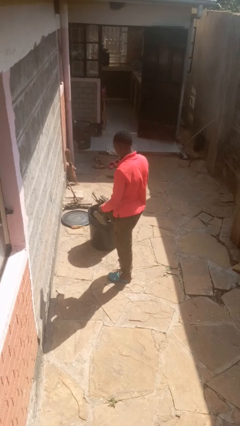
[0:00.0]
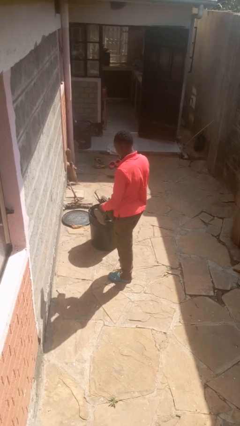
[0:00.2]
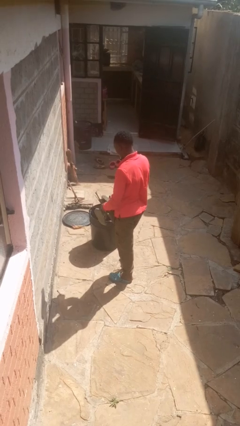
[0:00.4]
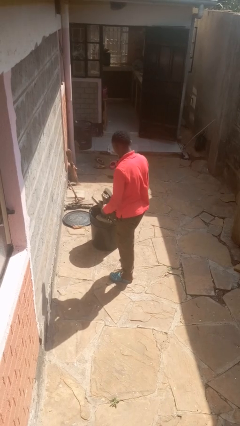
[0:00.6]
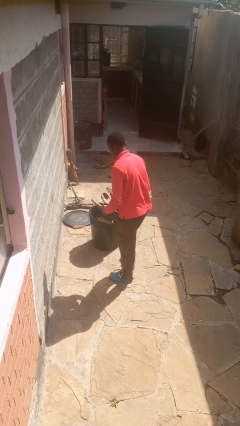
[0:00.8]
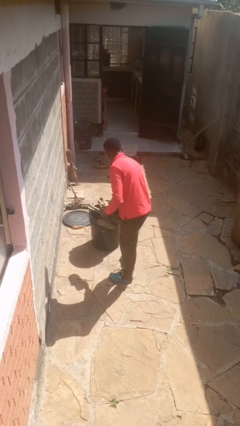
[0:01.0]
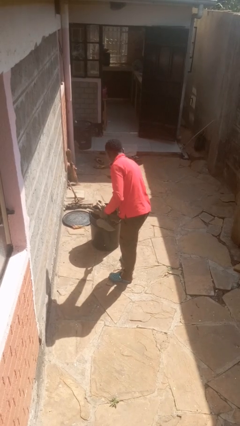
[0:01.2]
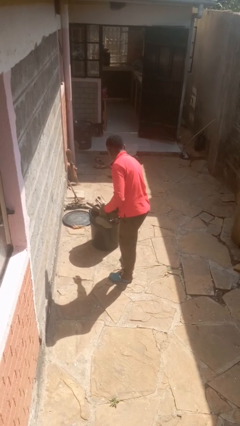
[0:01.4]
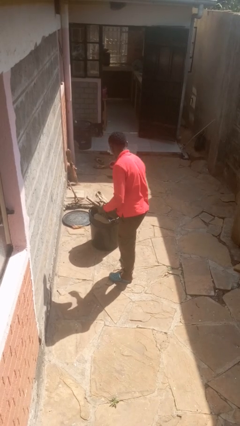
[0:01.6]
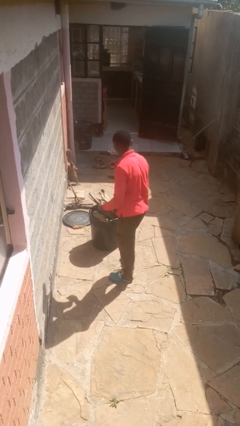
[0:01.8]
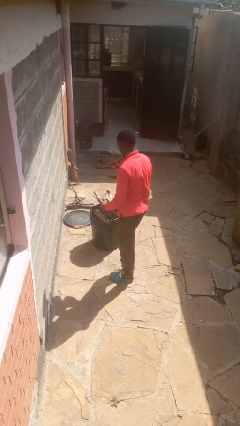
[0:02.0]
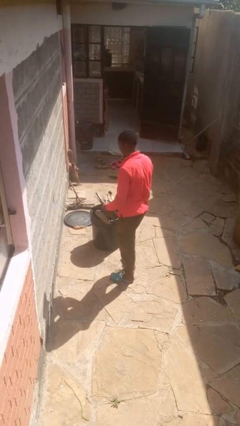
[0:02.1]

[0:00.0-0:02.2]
person discards trash

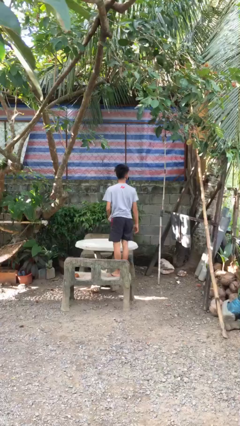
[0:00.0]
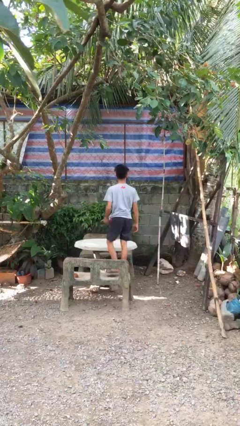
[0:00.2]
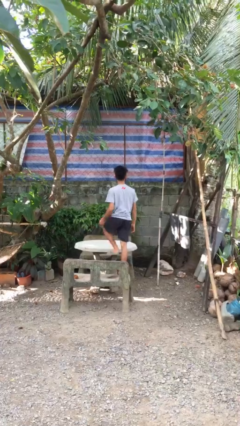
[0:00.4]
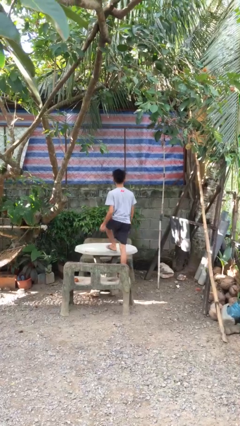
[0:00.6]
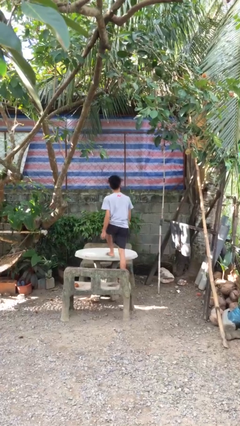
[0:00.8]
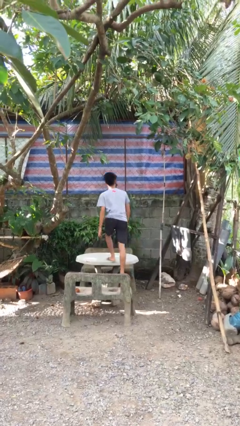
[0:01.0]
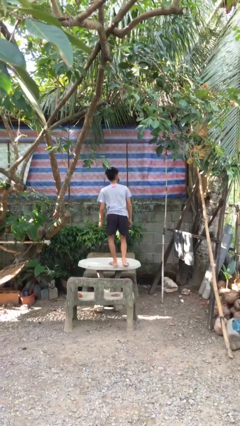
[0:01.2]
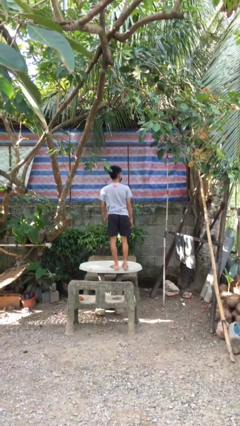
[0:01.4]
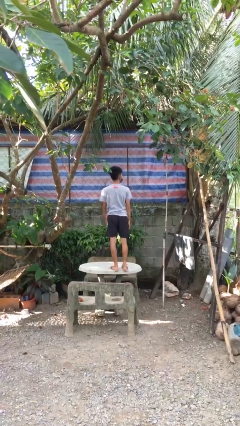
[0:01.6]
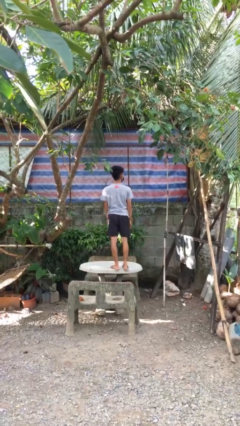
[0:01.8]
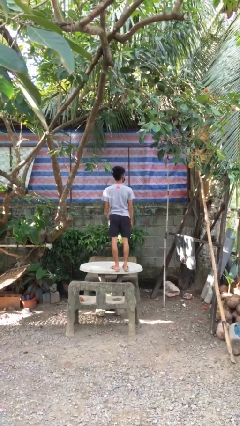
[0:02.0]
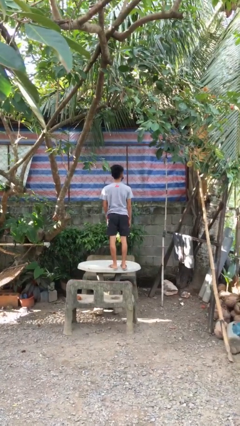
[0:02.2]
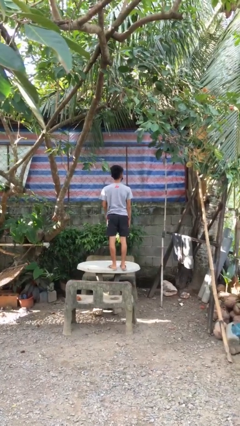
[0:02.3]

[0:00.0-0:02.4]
person climbs on table

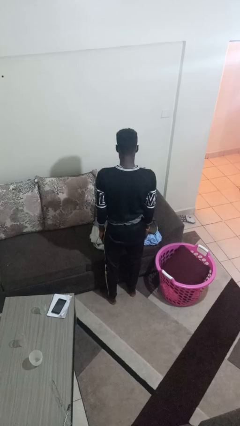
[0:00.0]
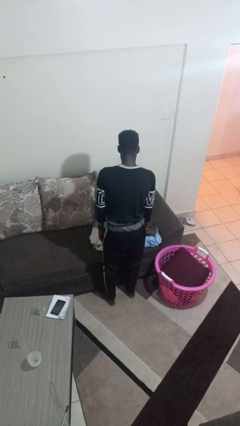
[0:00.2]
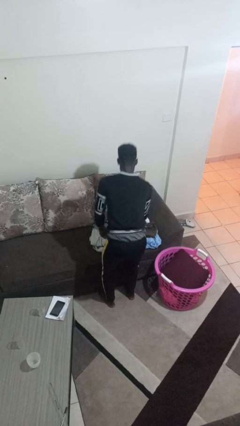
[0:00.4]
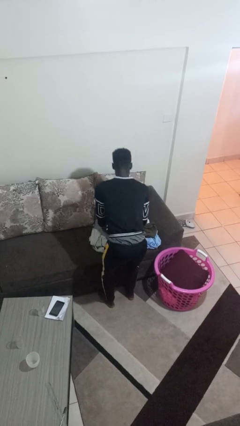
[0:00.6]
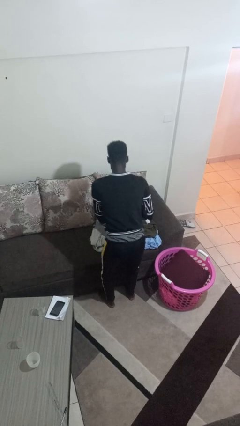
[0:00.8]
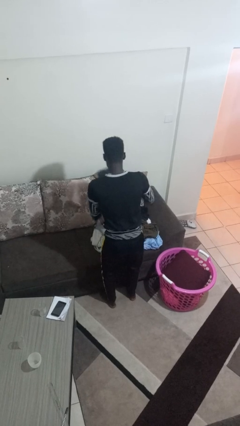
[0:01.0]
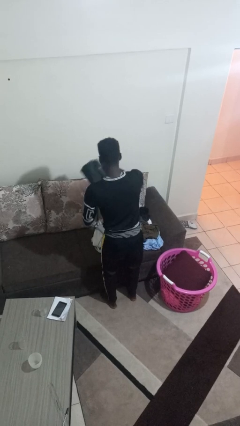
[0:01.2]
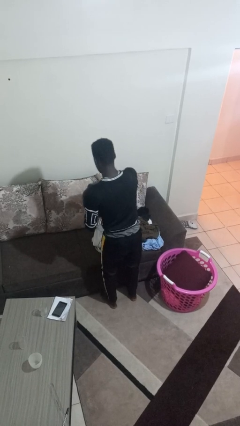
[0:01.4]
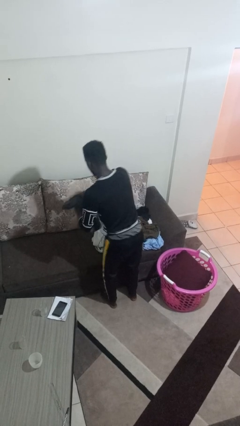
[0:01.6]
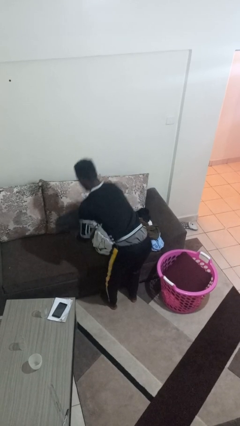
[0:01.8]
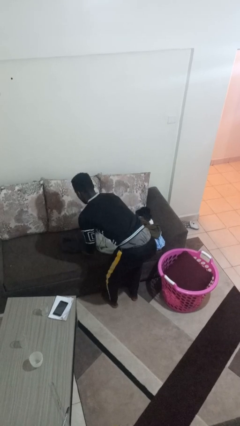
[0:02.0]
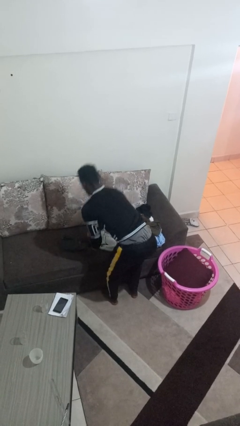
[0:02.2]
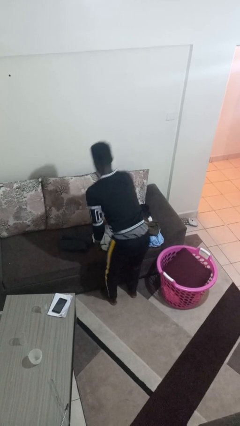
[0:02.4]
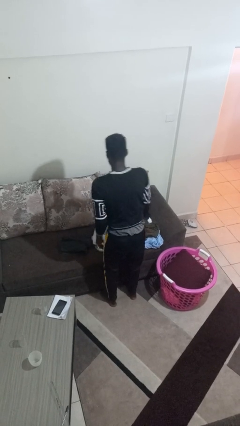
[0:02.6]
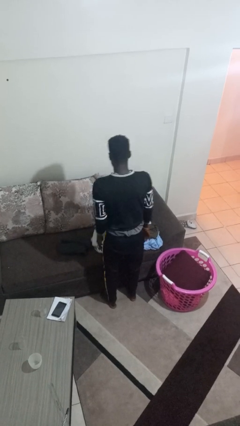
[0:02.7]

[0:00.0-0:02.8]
person folds pants

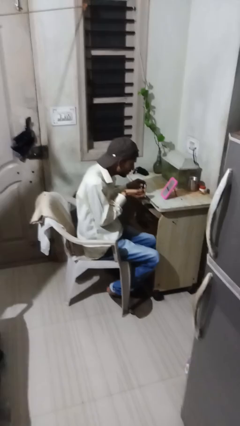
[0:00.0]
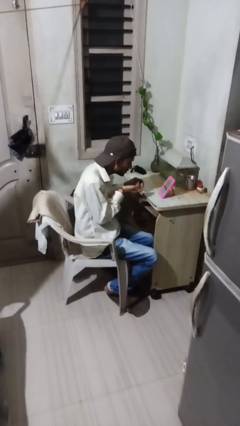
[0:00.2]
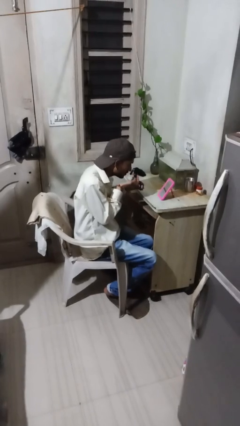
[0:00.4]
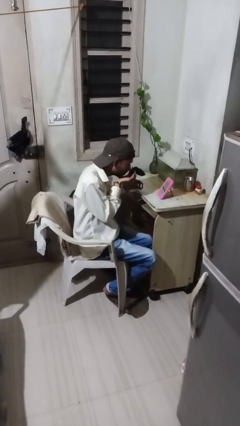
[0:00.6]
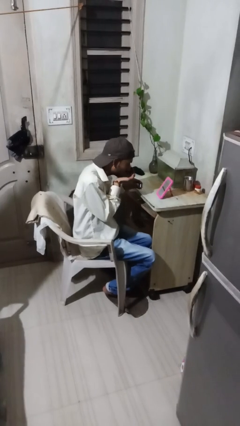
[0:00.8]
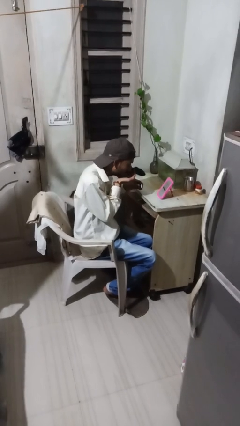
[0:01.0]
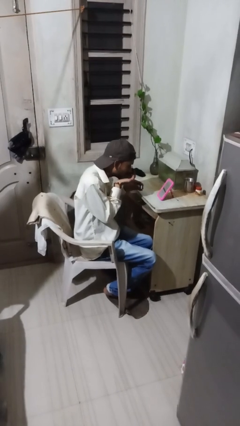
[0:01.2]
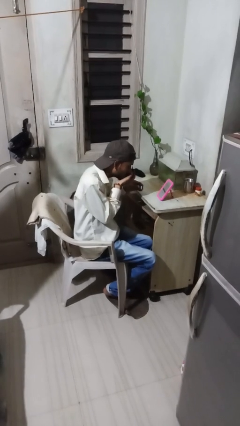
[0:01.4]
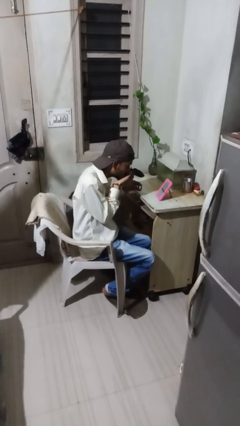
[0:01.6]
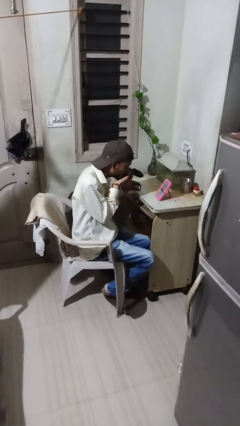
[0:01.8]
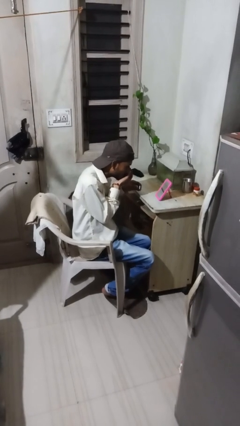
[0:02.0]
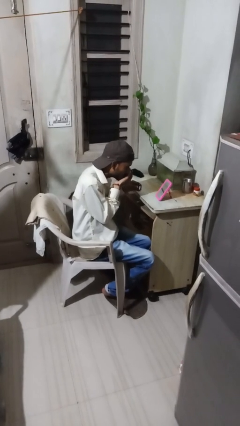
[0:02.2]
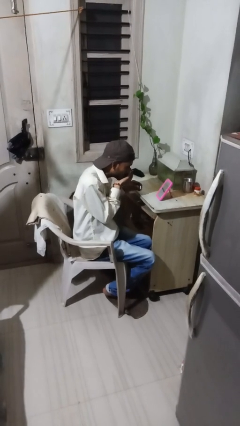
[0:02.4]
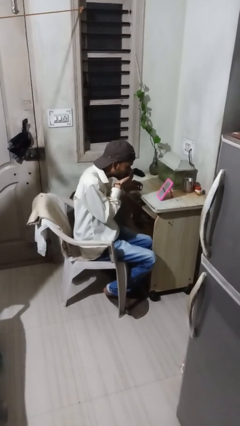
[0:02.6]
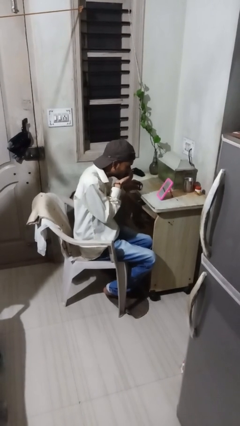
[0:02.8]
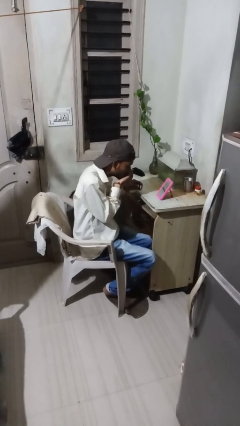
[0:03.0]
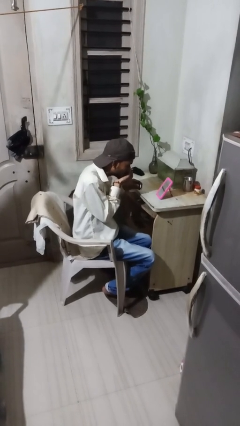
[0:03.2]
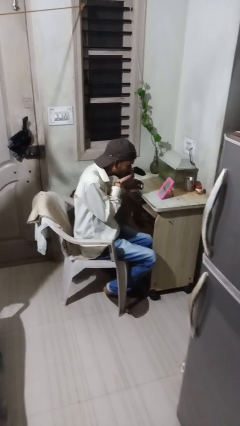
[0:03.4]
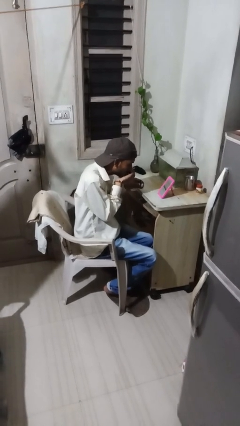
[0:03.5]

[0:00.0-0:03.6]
person applies eye makeup

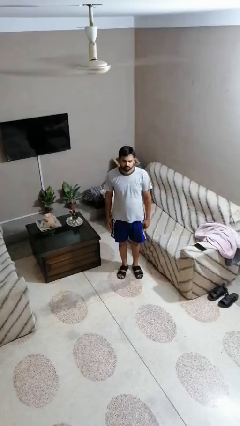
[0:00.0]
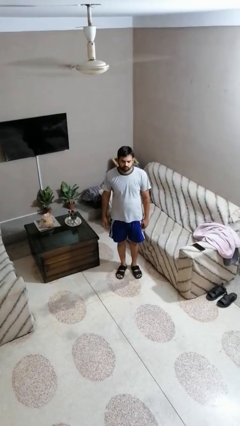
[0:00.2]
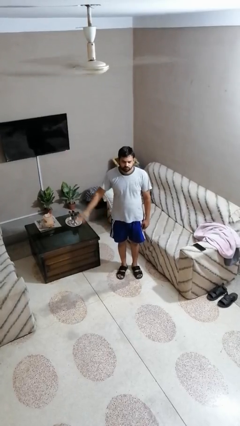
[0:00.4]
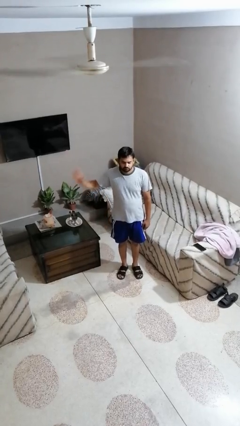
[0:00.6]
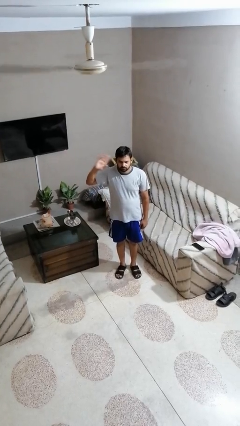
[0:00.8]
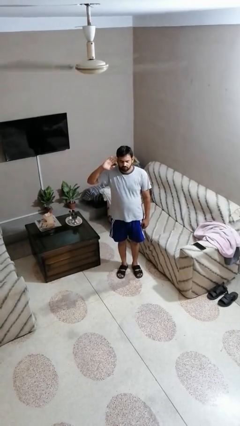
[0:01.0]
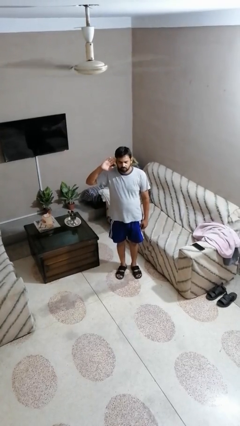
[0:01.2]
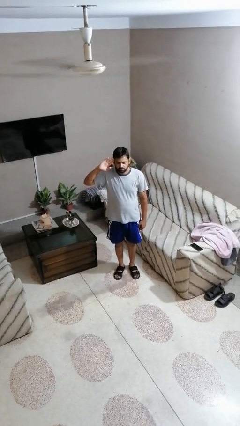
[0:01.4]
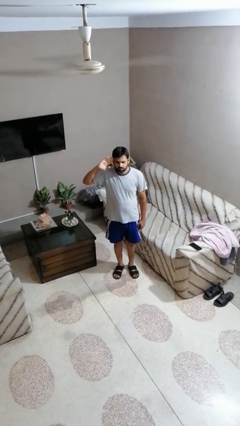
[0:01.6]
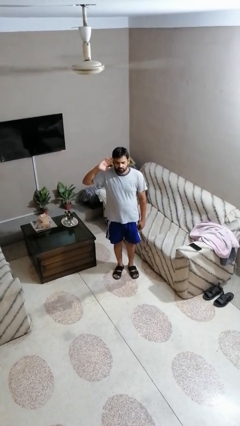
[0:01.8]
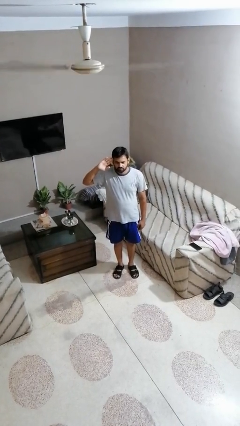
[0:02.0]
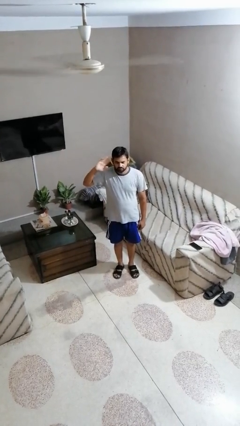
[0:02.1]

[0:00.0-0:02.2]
person salutes

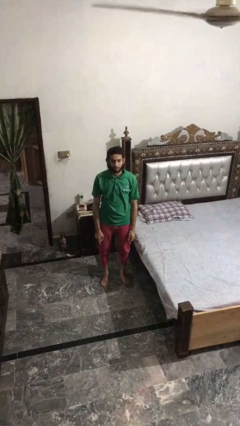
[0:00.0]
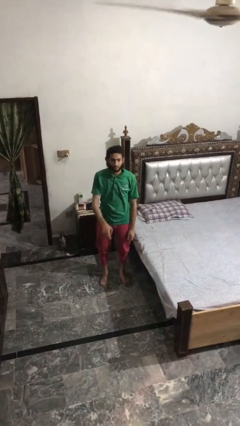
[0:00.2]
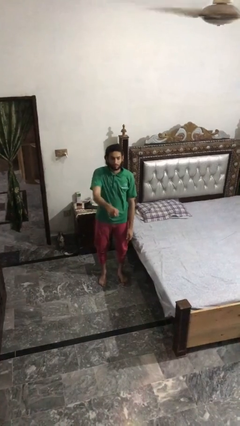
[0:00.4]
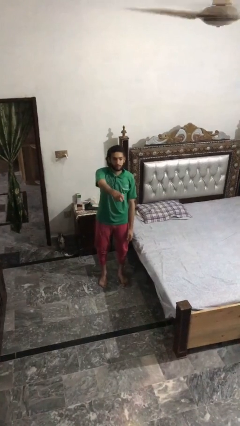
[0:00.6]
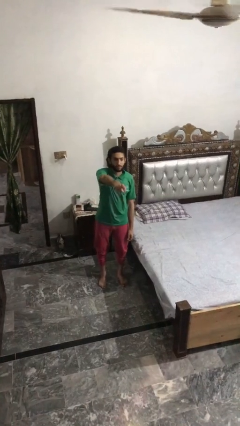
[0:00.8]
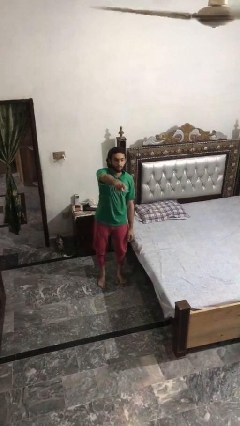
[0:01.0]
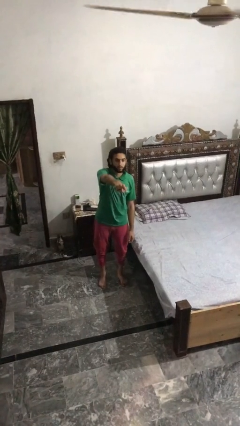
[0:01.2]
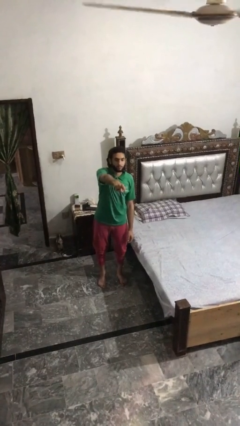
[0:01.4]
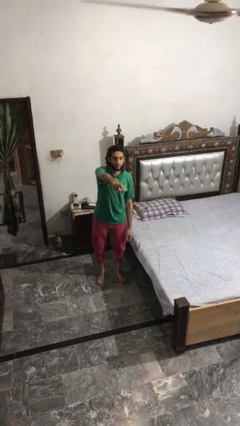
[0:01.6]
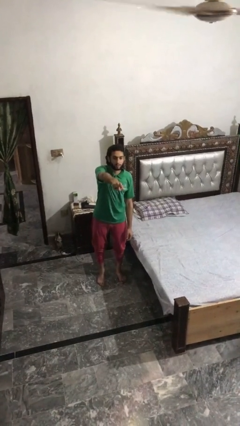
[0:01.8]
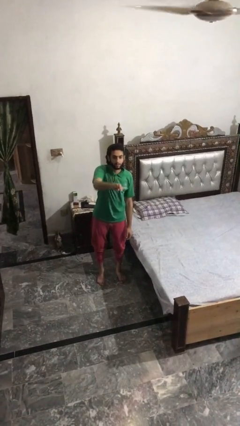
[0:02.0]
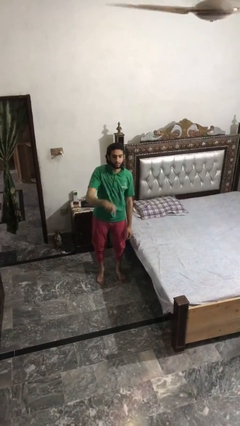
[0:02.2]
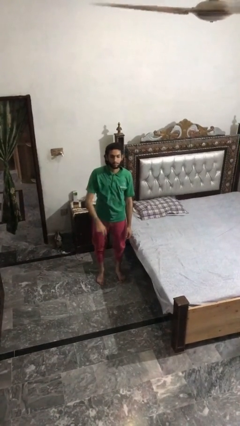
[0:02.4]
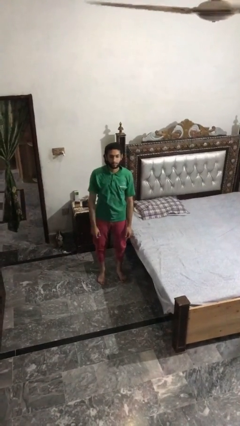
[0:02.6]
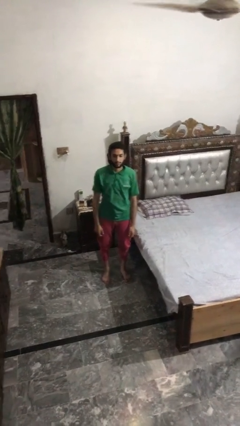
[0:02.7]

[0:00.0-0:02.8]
person points at person

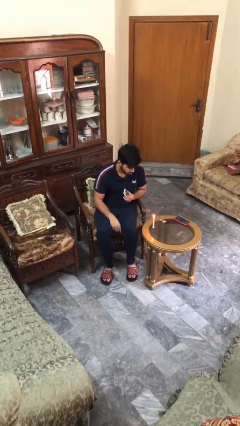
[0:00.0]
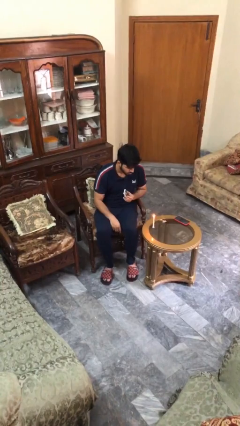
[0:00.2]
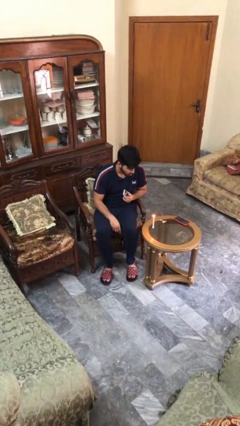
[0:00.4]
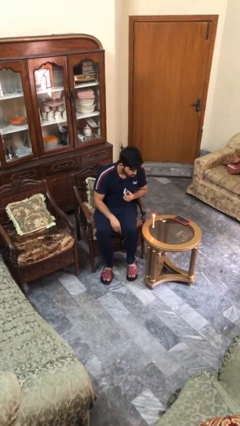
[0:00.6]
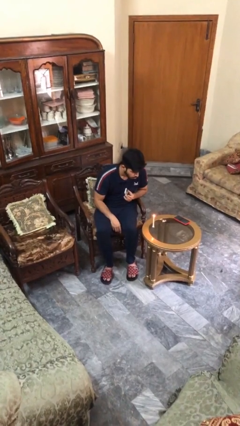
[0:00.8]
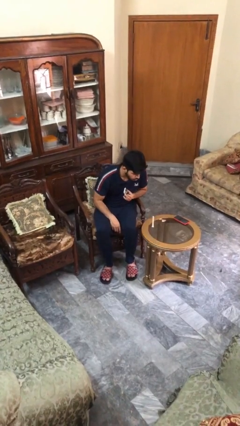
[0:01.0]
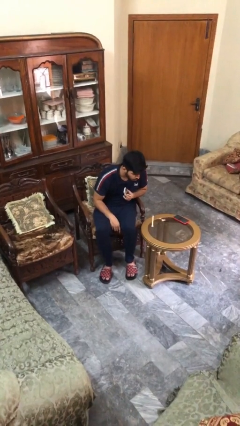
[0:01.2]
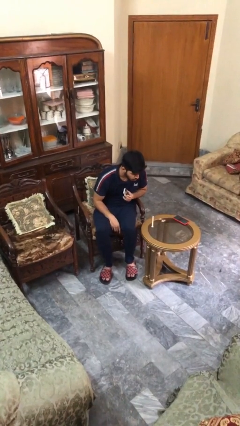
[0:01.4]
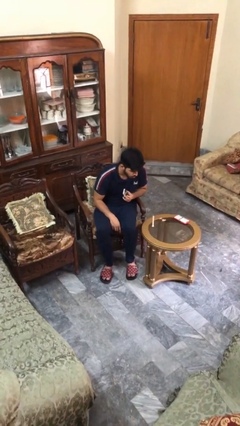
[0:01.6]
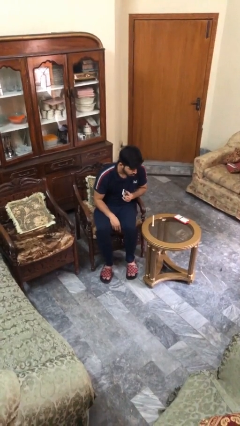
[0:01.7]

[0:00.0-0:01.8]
person extinguishes candle
